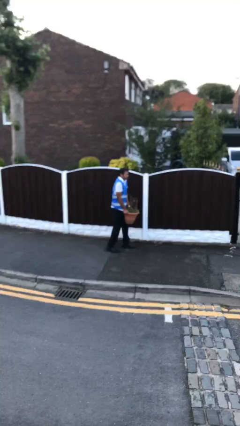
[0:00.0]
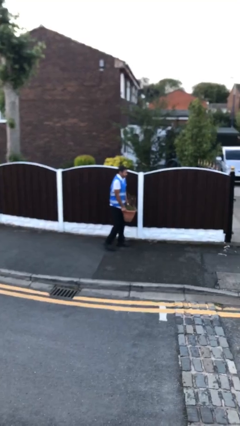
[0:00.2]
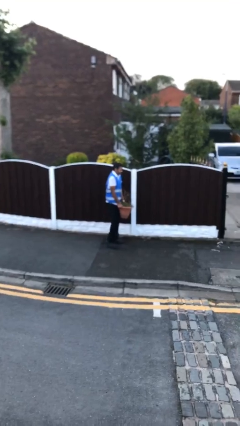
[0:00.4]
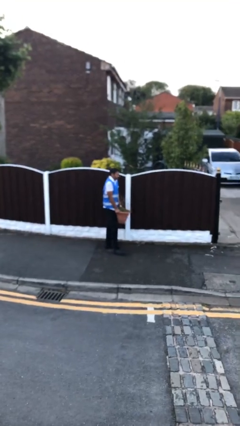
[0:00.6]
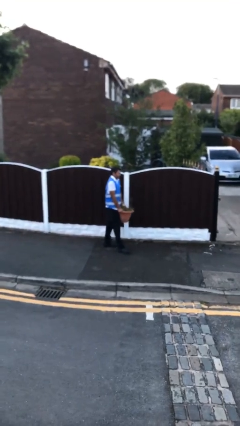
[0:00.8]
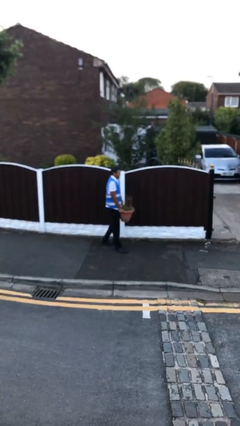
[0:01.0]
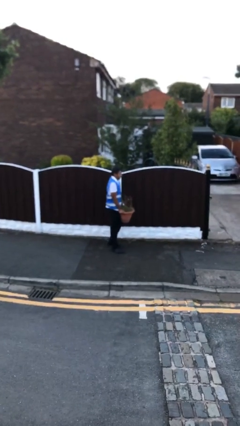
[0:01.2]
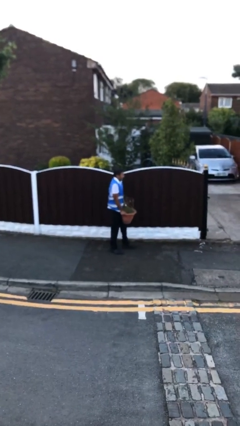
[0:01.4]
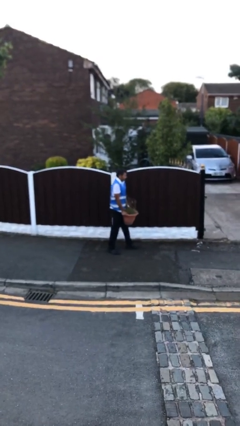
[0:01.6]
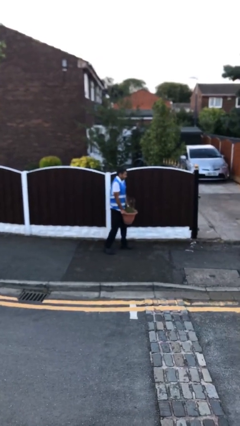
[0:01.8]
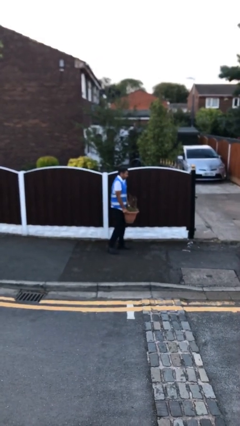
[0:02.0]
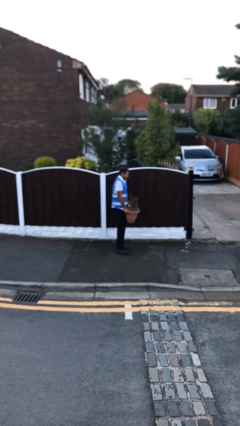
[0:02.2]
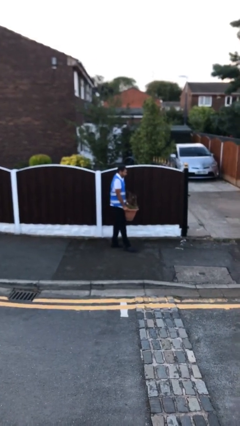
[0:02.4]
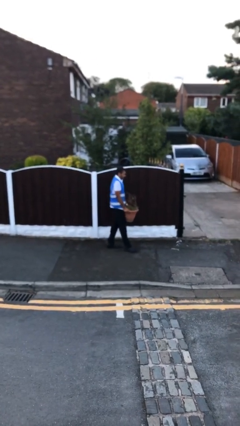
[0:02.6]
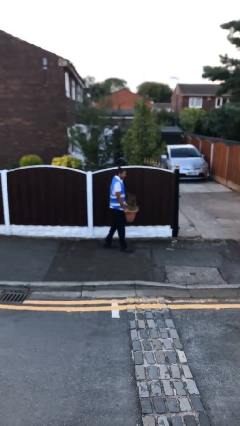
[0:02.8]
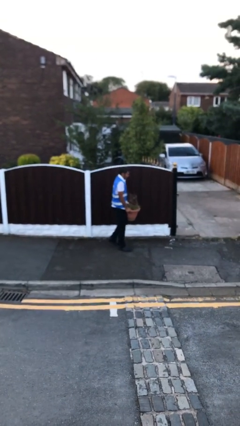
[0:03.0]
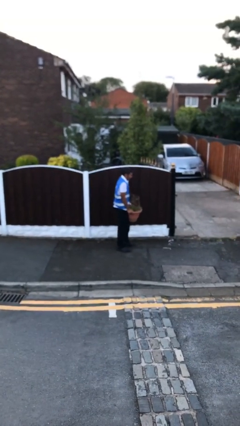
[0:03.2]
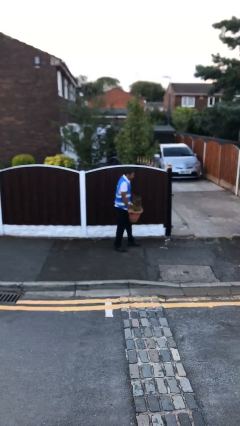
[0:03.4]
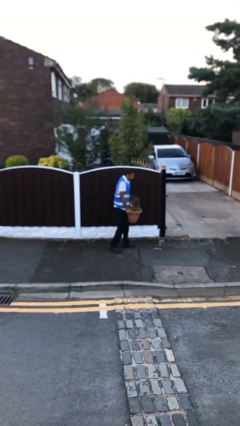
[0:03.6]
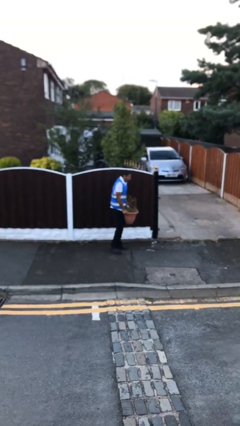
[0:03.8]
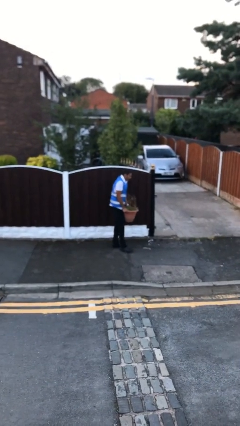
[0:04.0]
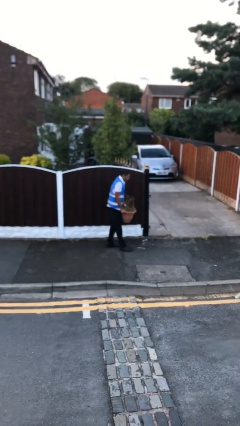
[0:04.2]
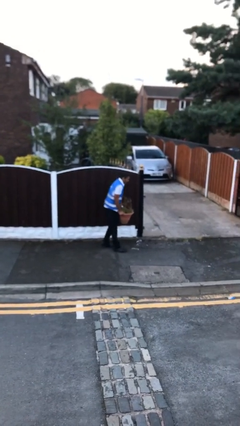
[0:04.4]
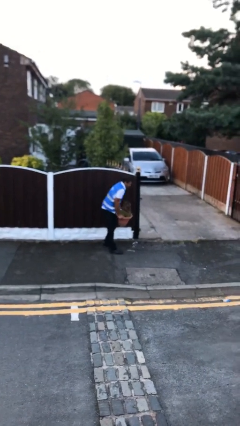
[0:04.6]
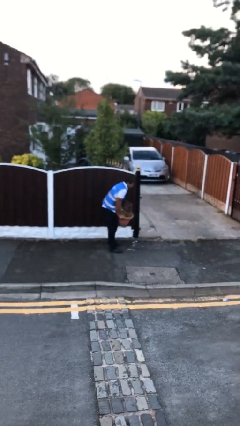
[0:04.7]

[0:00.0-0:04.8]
person carries heavy object

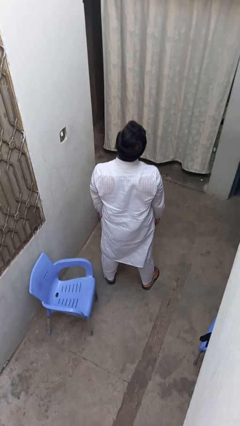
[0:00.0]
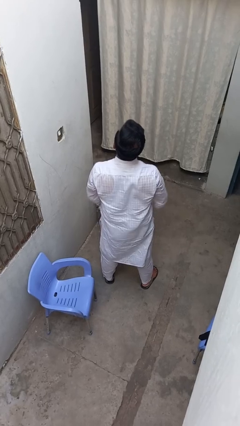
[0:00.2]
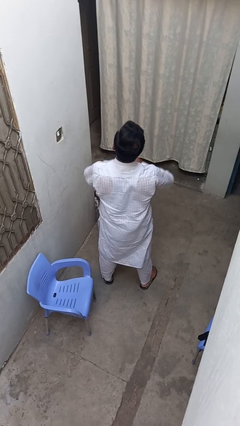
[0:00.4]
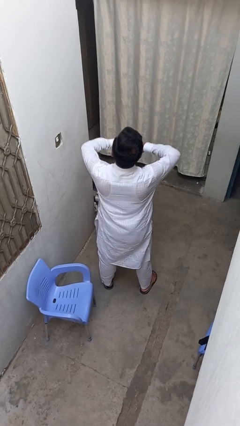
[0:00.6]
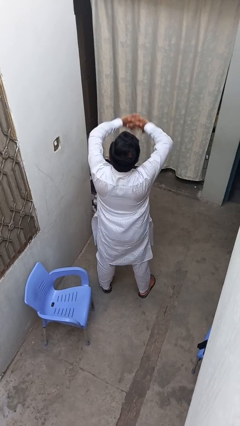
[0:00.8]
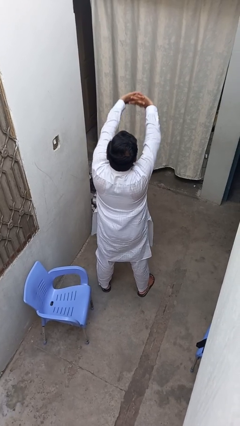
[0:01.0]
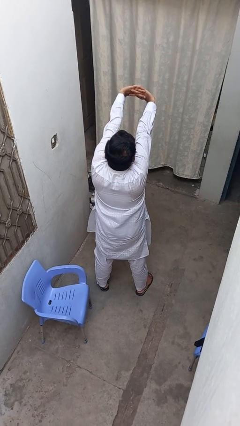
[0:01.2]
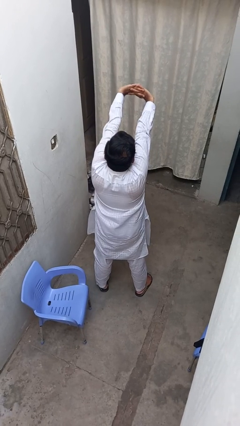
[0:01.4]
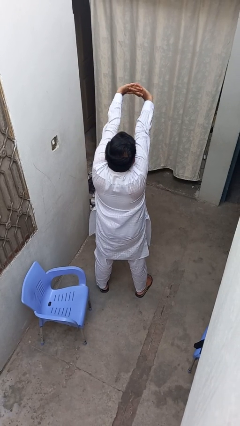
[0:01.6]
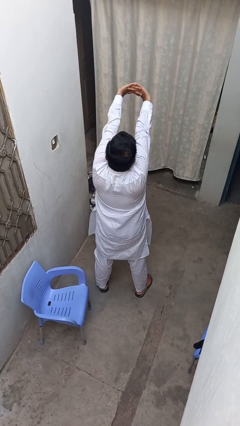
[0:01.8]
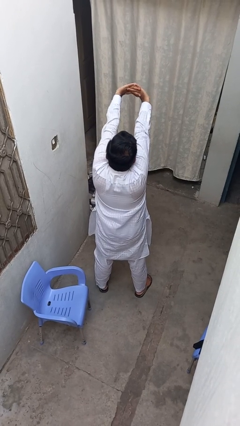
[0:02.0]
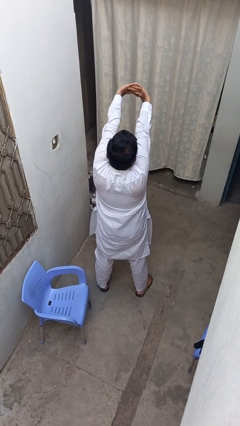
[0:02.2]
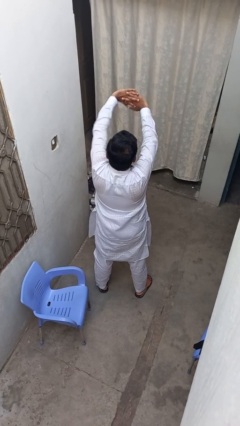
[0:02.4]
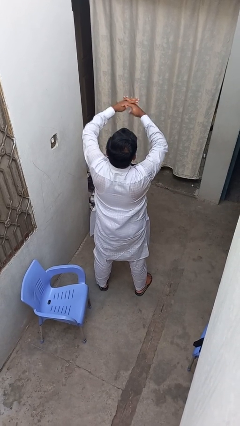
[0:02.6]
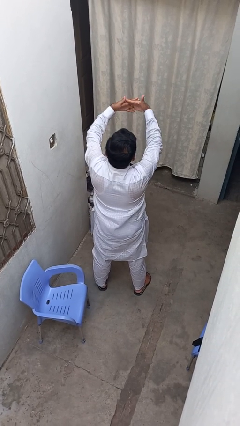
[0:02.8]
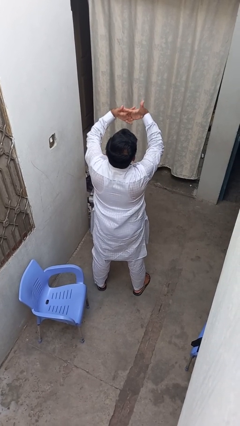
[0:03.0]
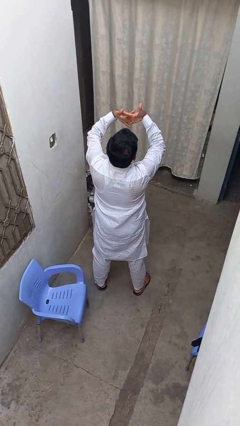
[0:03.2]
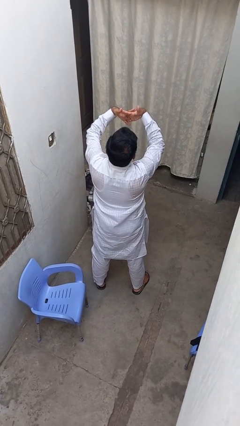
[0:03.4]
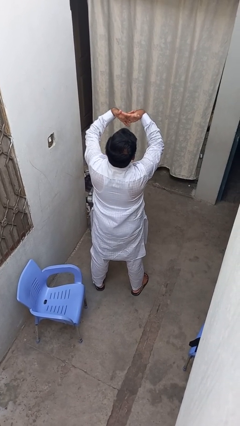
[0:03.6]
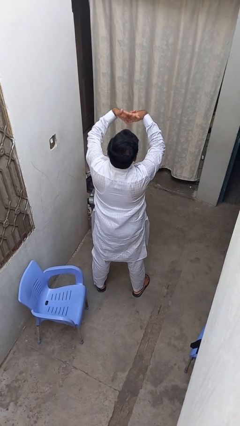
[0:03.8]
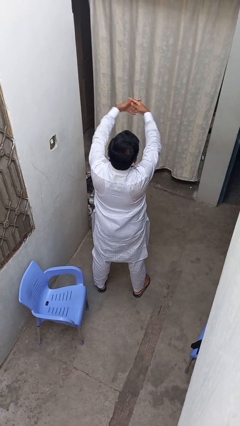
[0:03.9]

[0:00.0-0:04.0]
person snaps fingers

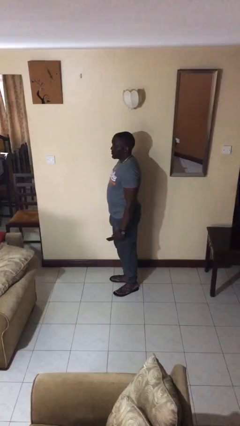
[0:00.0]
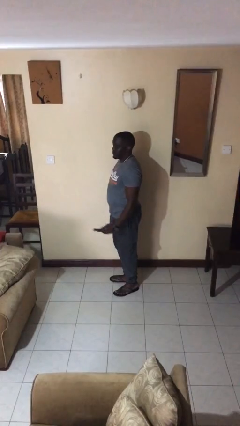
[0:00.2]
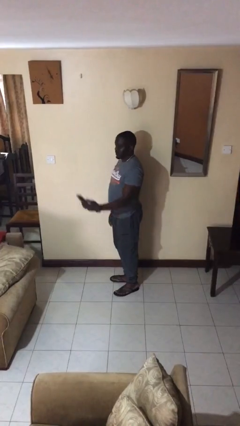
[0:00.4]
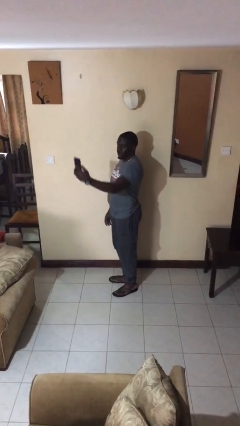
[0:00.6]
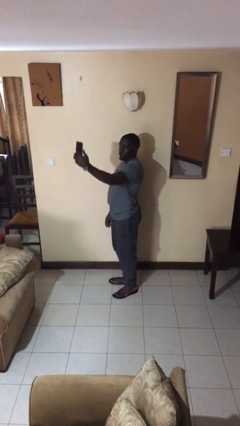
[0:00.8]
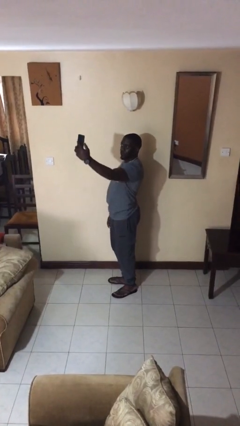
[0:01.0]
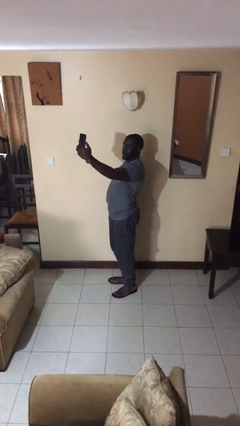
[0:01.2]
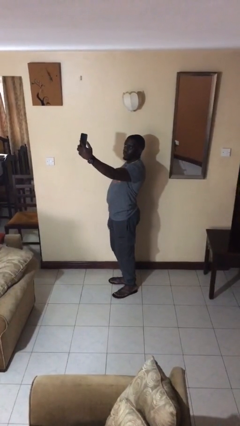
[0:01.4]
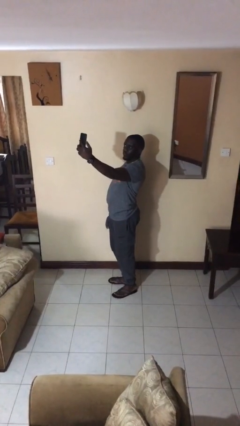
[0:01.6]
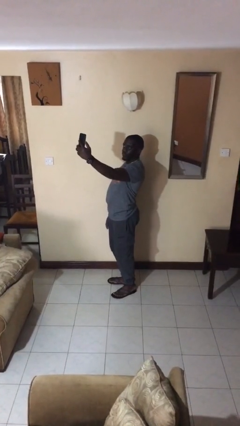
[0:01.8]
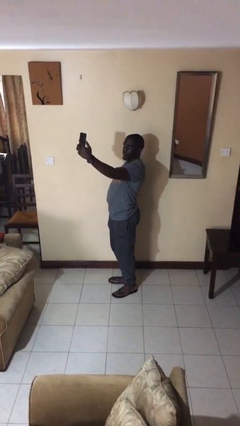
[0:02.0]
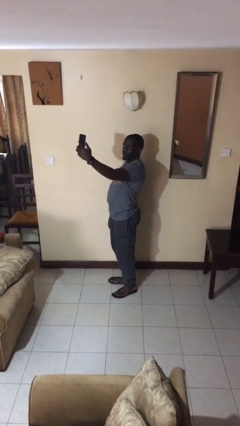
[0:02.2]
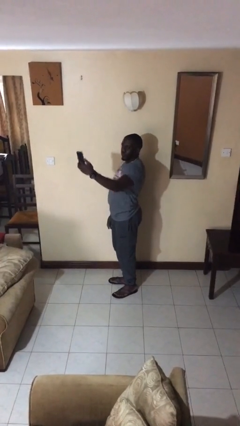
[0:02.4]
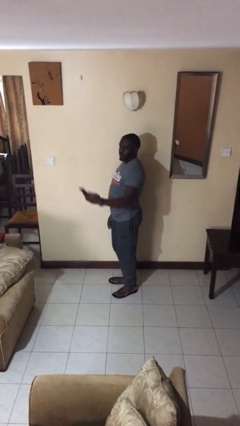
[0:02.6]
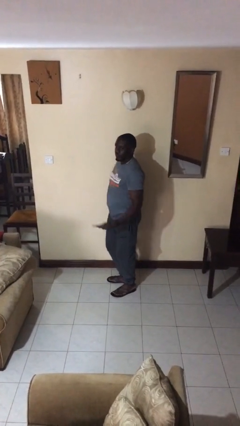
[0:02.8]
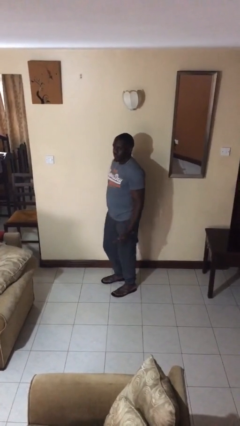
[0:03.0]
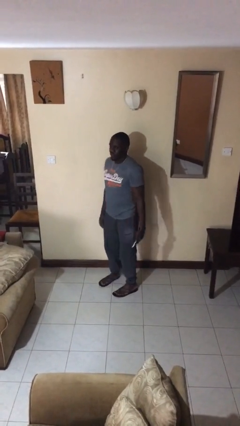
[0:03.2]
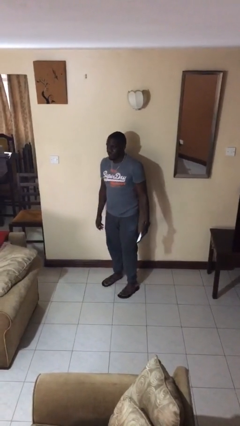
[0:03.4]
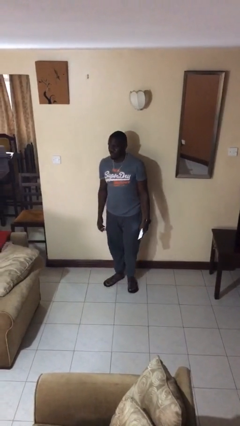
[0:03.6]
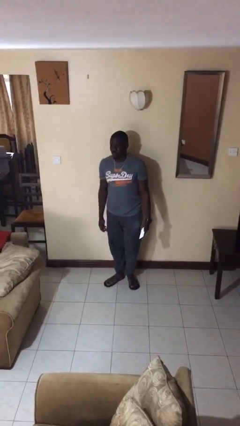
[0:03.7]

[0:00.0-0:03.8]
person takes selfie

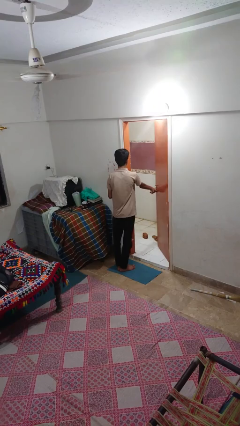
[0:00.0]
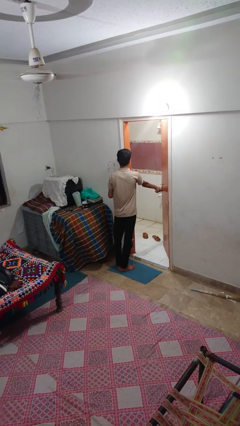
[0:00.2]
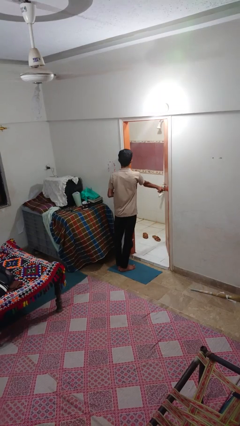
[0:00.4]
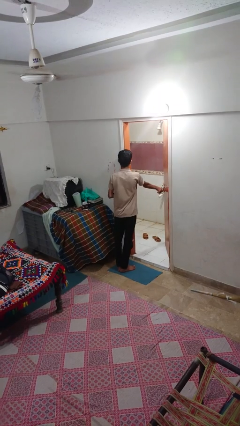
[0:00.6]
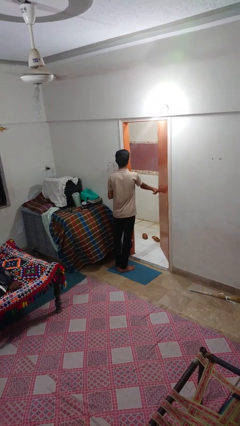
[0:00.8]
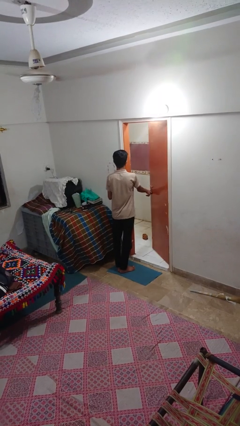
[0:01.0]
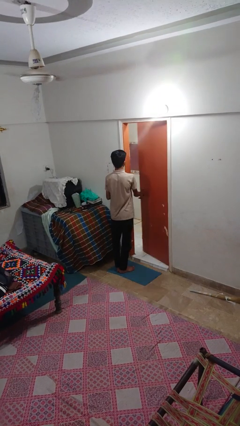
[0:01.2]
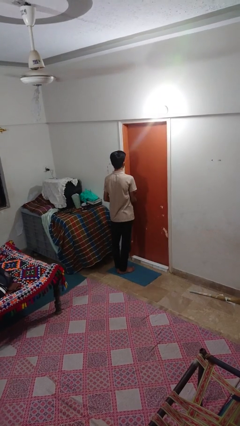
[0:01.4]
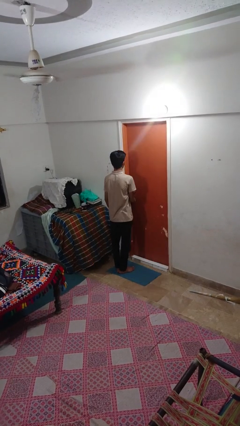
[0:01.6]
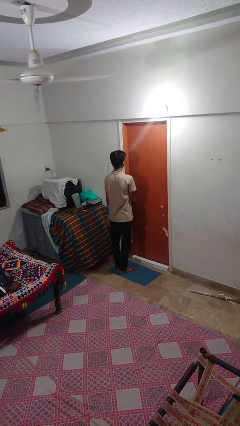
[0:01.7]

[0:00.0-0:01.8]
person closes facility door

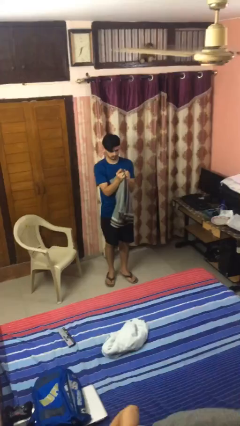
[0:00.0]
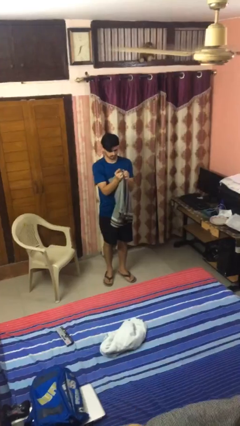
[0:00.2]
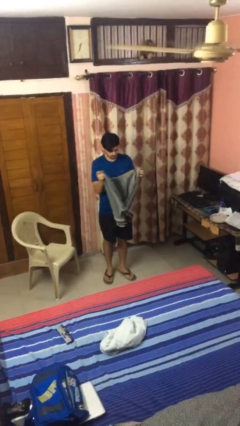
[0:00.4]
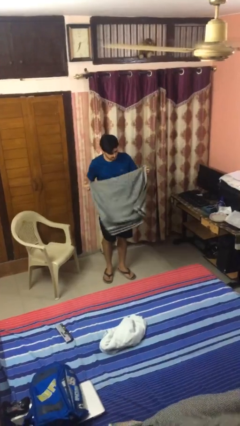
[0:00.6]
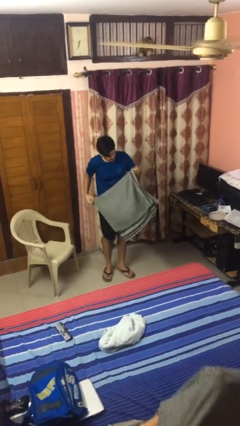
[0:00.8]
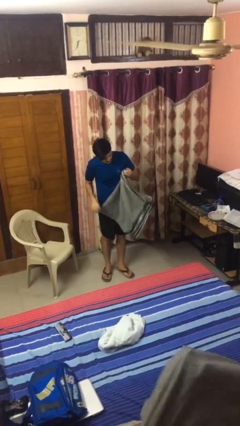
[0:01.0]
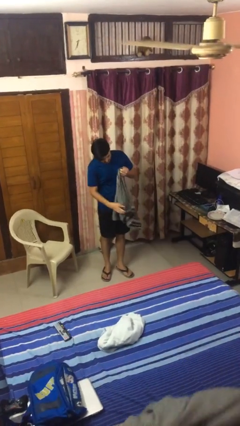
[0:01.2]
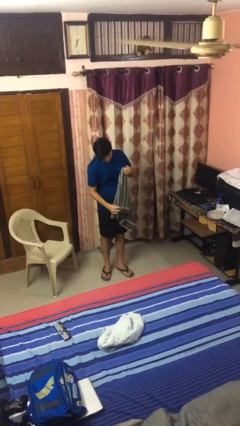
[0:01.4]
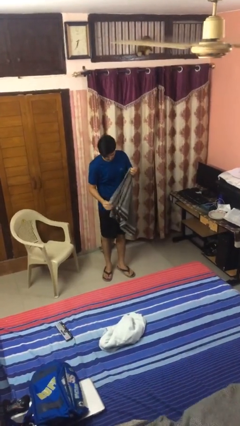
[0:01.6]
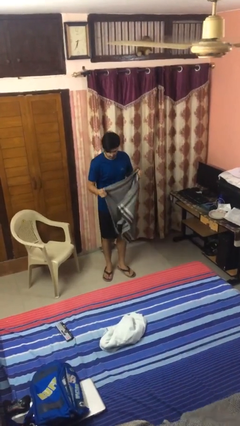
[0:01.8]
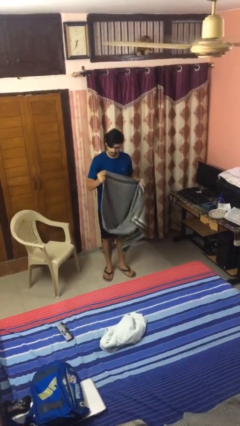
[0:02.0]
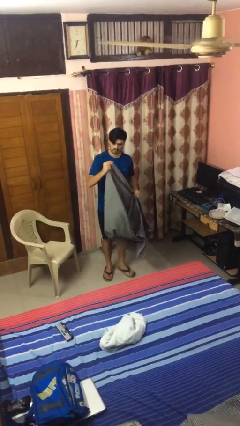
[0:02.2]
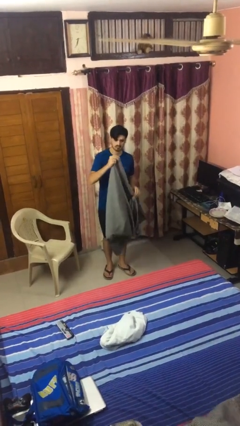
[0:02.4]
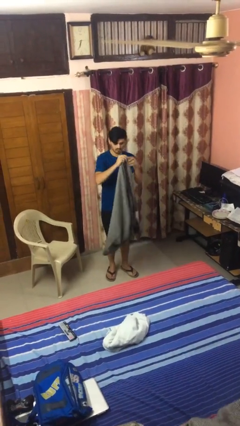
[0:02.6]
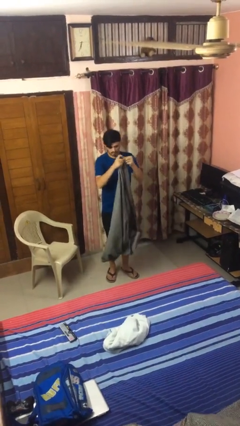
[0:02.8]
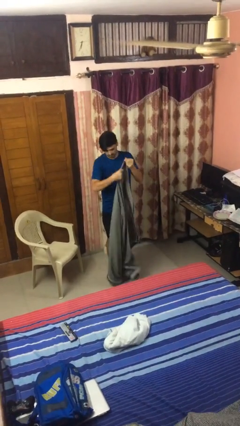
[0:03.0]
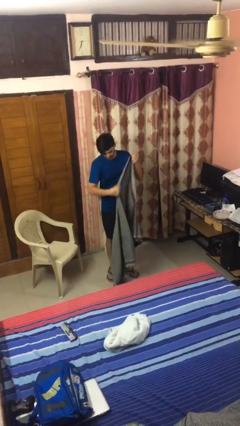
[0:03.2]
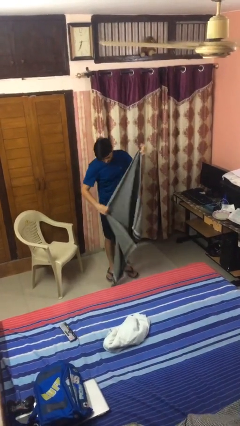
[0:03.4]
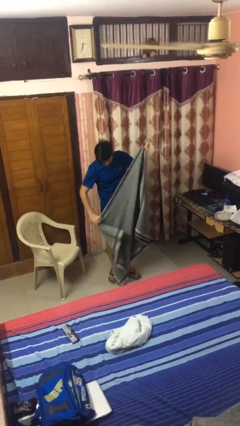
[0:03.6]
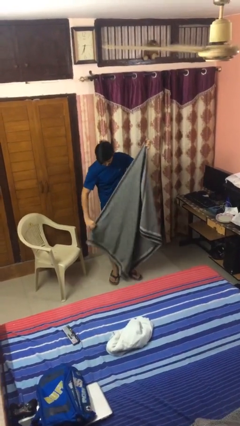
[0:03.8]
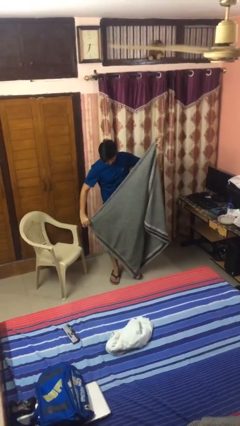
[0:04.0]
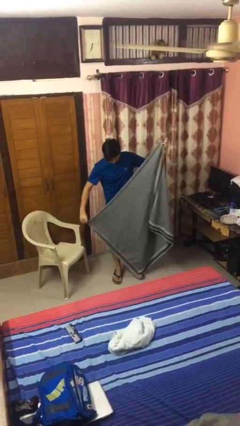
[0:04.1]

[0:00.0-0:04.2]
person unfolds blanket
